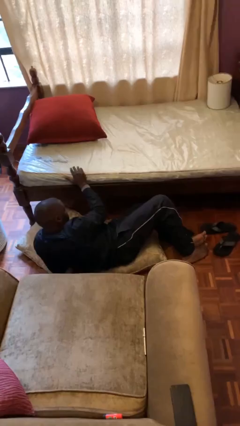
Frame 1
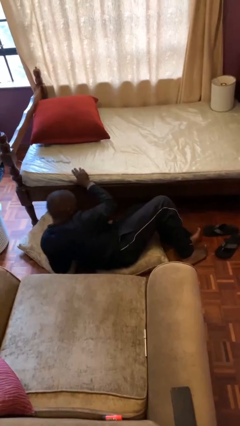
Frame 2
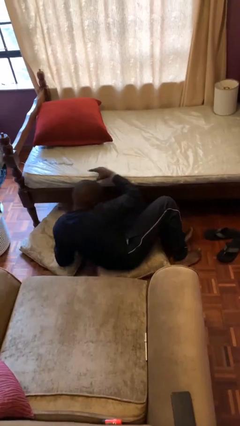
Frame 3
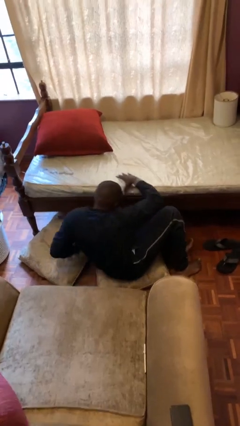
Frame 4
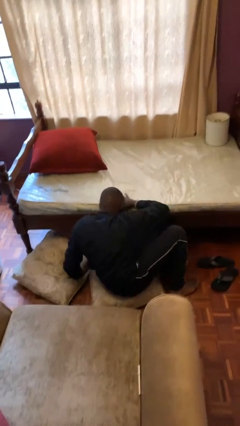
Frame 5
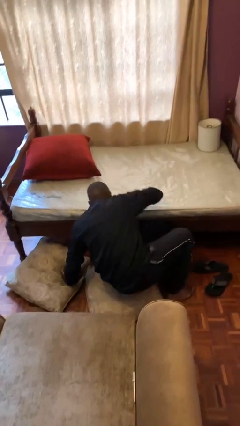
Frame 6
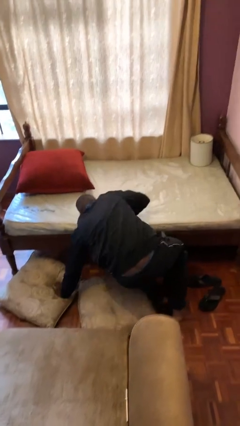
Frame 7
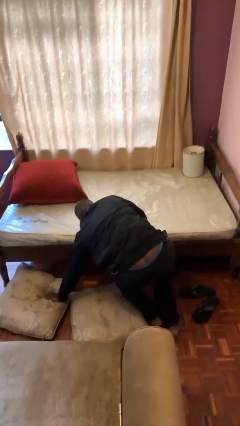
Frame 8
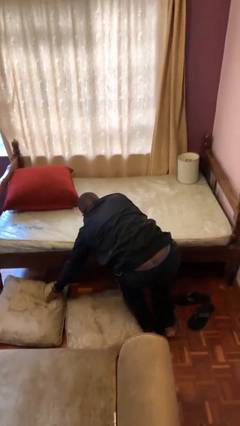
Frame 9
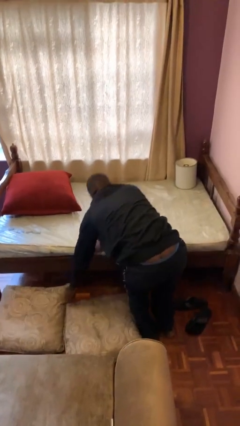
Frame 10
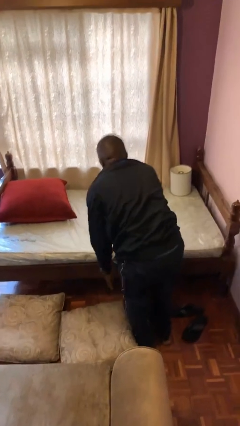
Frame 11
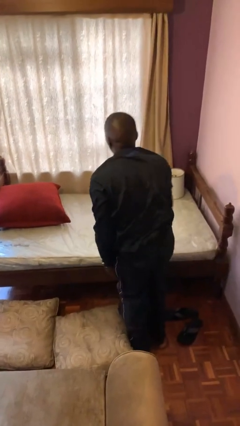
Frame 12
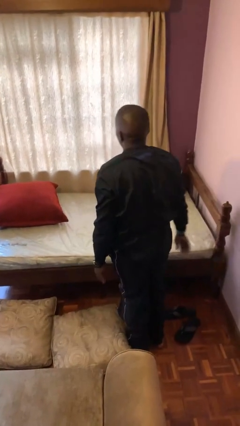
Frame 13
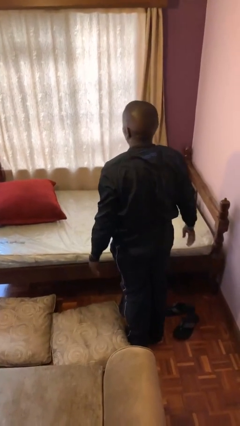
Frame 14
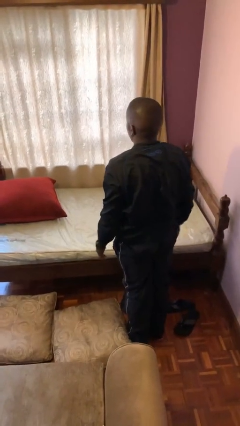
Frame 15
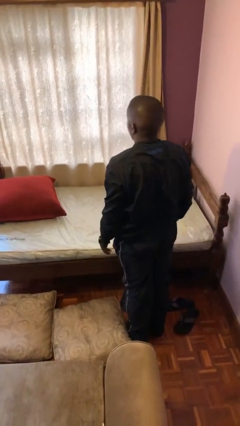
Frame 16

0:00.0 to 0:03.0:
person stands up from floor

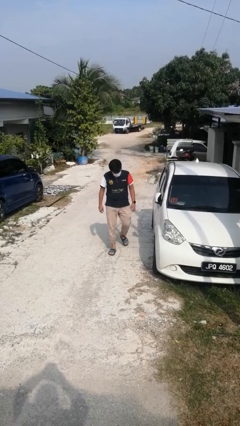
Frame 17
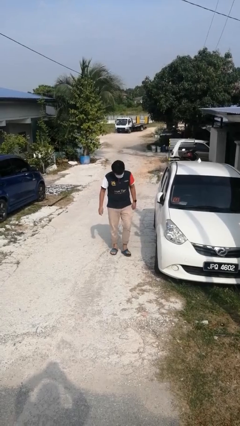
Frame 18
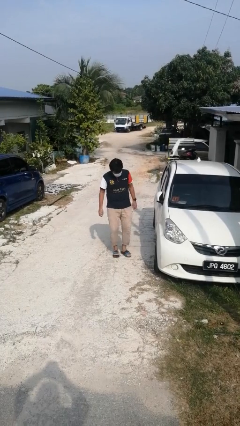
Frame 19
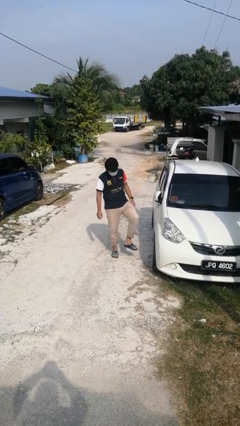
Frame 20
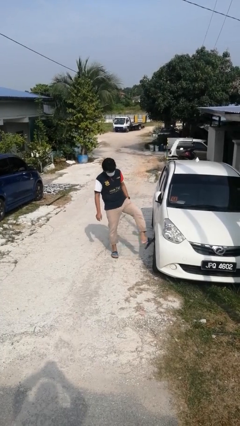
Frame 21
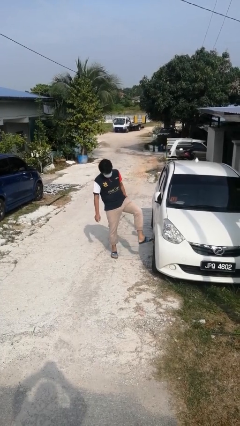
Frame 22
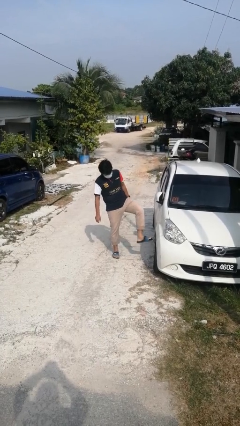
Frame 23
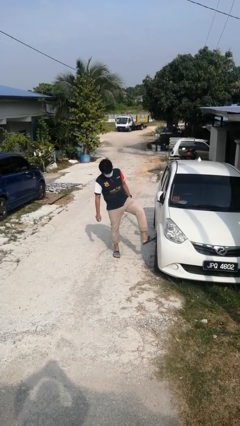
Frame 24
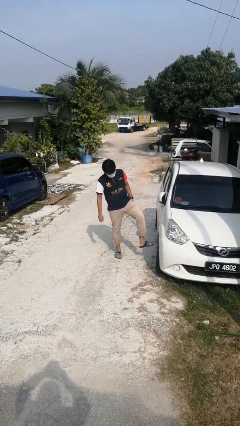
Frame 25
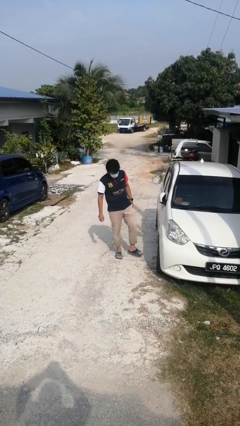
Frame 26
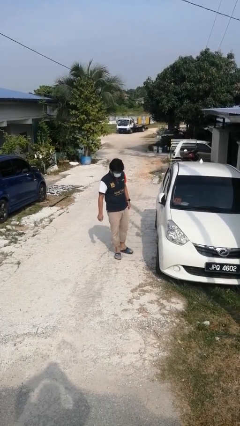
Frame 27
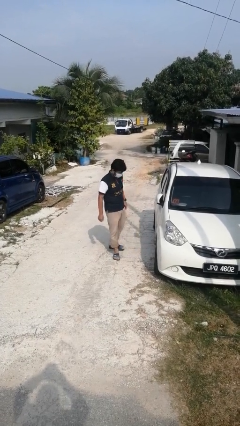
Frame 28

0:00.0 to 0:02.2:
person kicks car tires

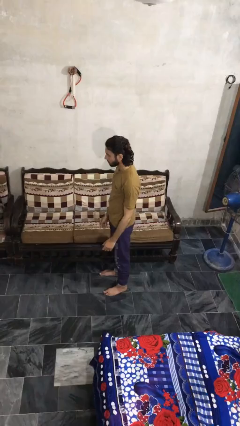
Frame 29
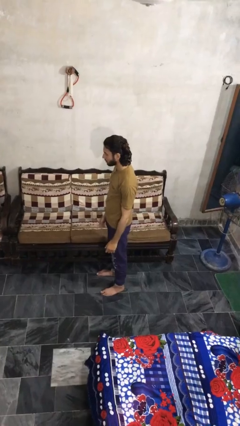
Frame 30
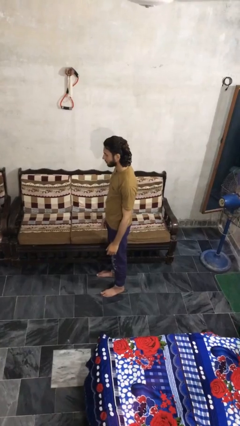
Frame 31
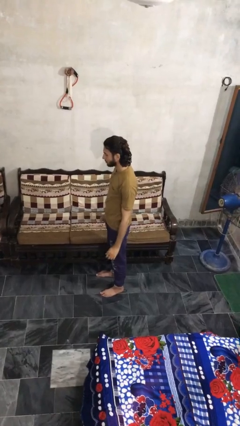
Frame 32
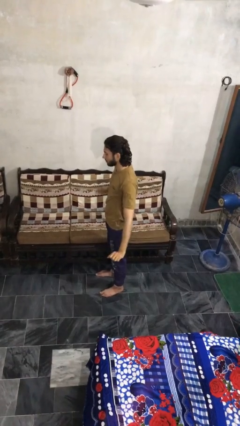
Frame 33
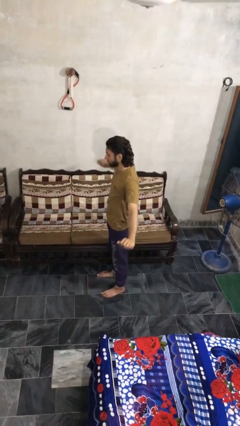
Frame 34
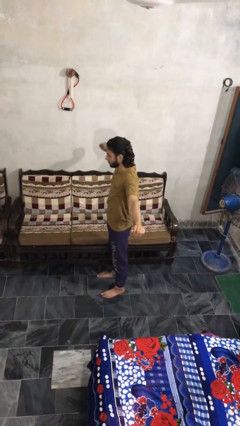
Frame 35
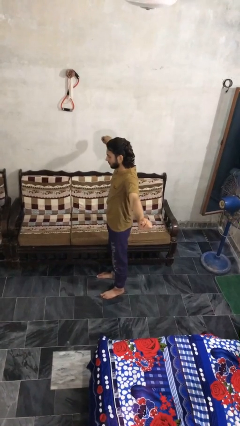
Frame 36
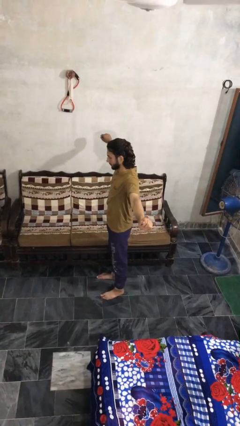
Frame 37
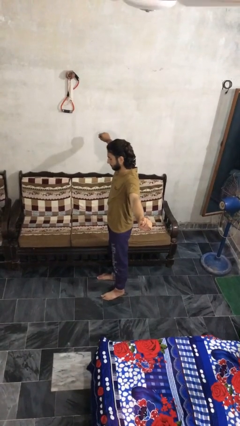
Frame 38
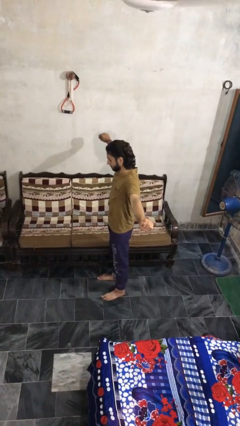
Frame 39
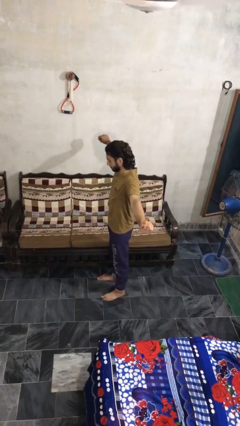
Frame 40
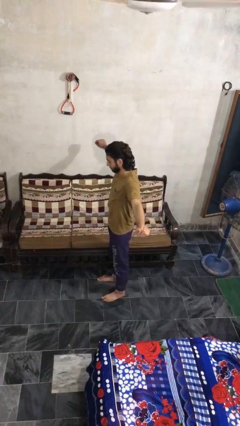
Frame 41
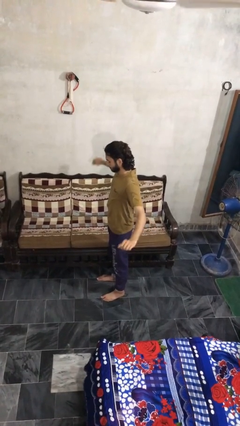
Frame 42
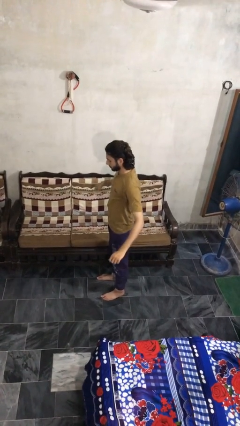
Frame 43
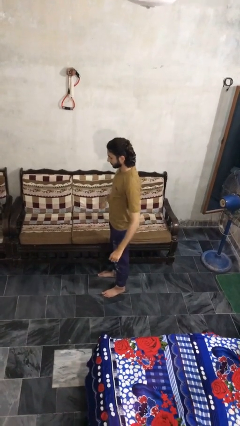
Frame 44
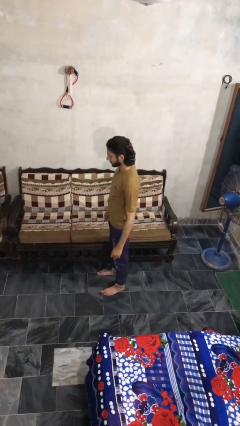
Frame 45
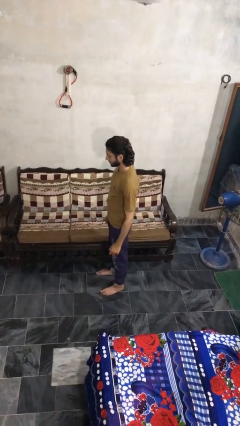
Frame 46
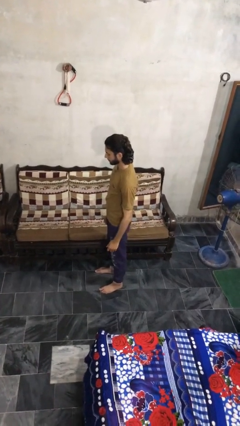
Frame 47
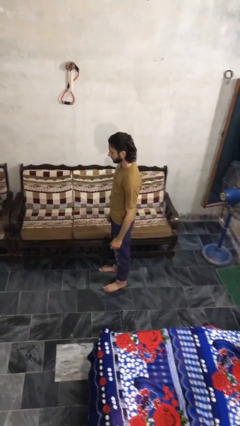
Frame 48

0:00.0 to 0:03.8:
person stretches arms to side

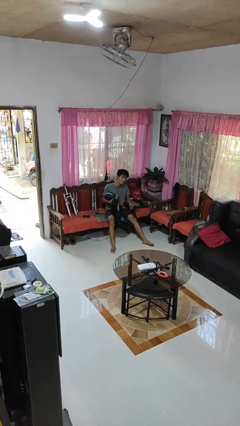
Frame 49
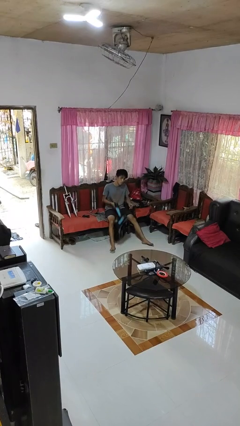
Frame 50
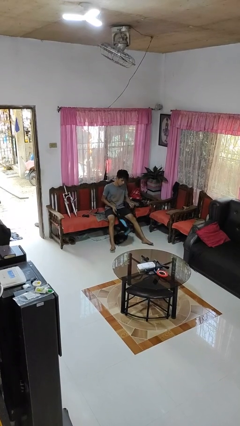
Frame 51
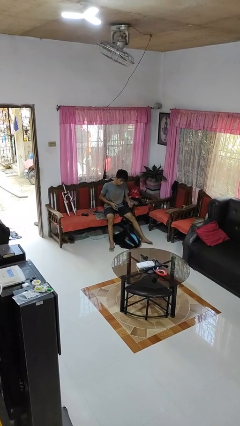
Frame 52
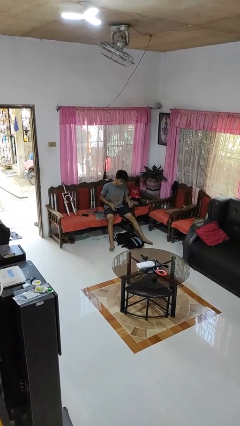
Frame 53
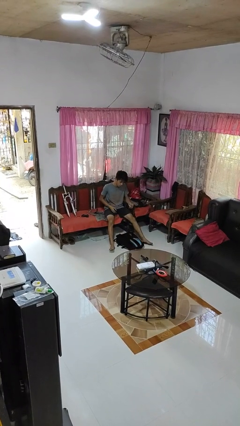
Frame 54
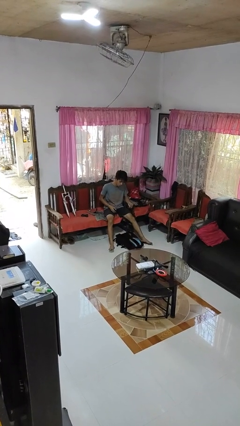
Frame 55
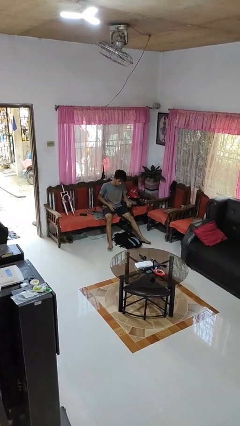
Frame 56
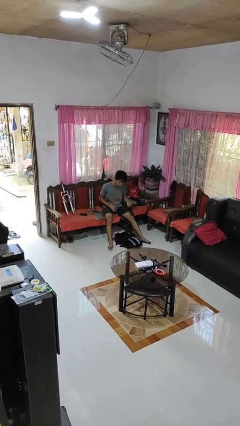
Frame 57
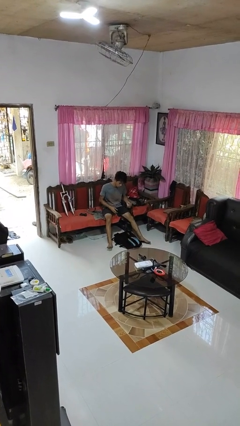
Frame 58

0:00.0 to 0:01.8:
person drops object

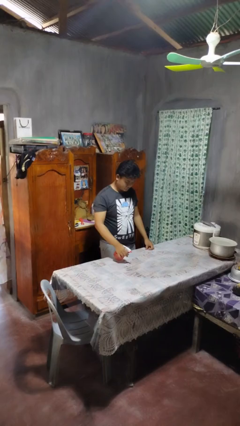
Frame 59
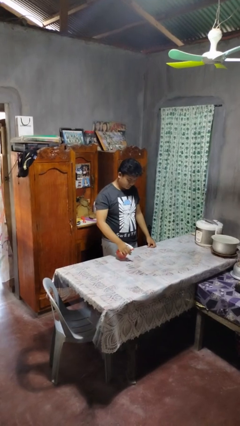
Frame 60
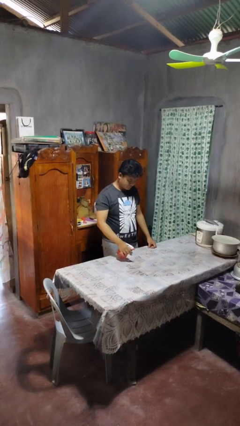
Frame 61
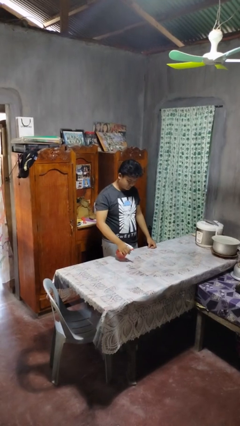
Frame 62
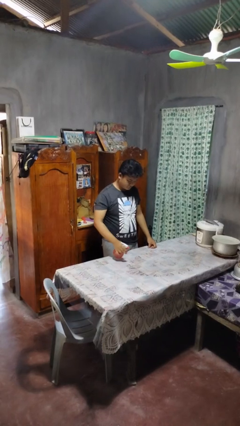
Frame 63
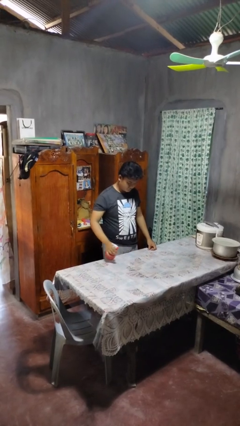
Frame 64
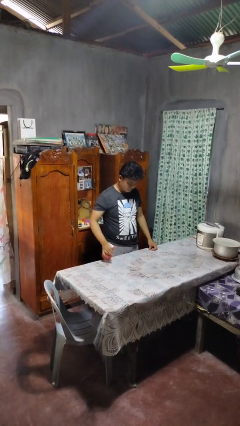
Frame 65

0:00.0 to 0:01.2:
person sprays from bottle

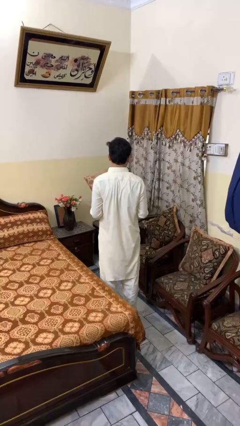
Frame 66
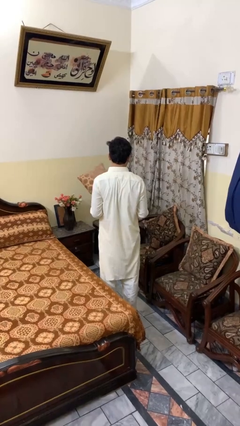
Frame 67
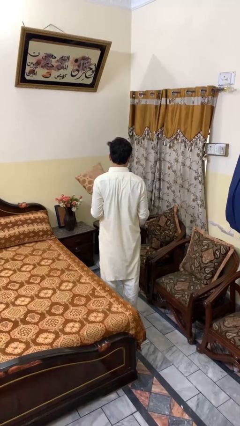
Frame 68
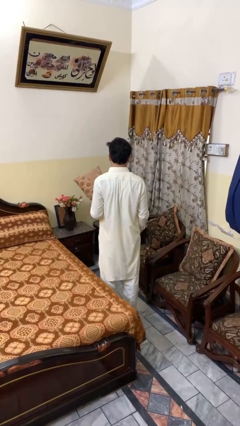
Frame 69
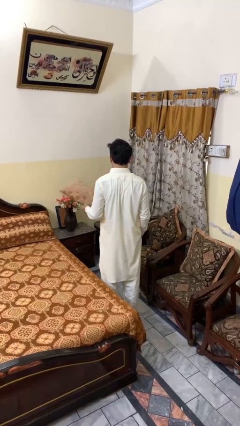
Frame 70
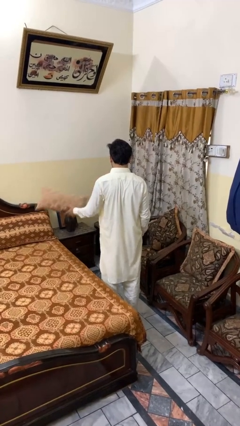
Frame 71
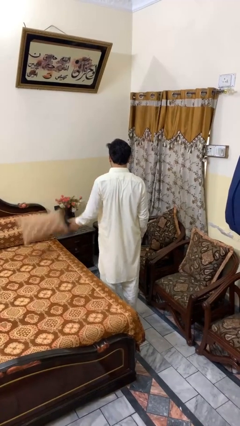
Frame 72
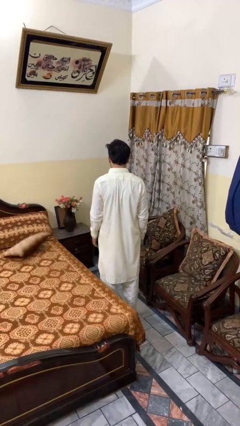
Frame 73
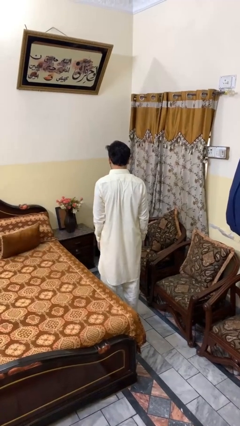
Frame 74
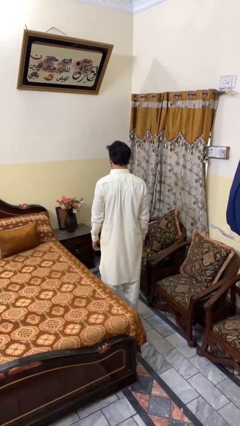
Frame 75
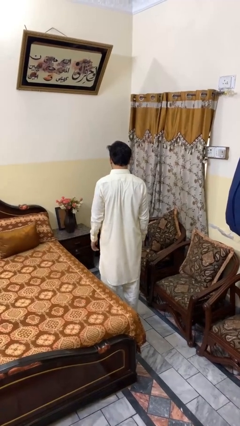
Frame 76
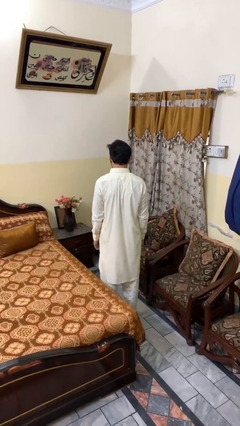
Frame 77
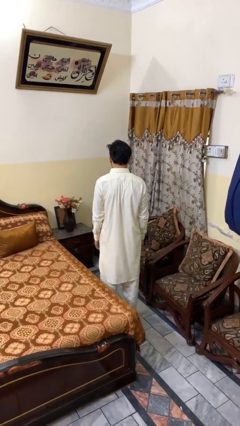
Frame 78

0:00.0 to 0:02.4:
person throws object on bed

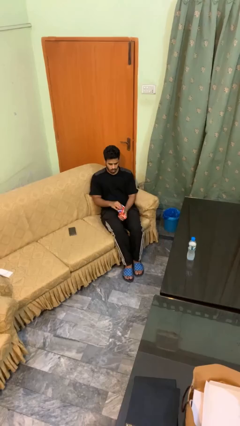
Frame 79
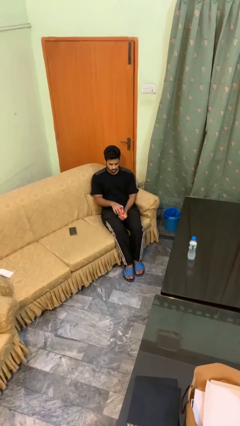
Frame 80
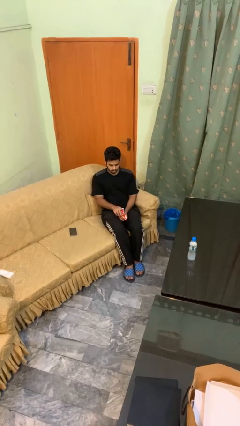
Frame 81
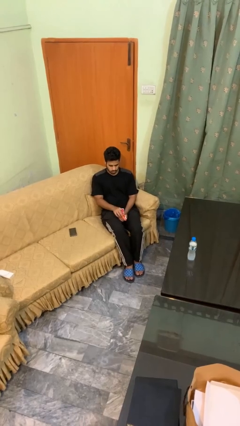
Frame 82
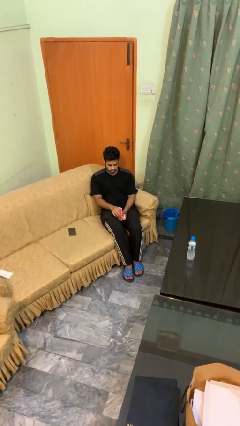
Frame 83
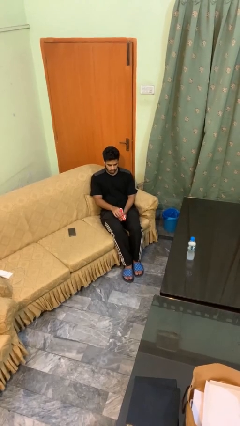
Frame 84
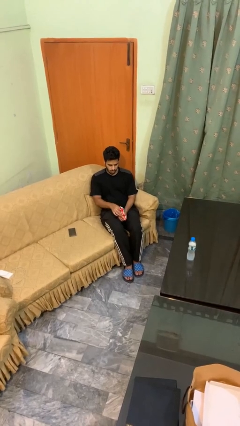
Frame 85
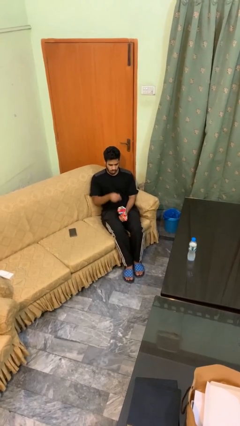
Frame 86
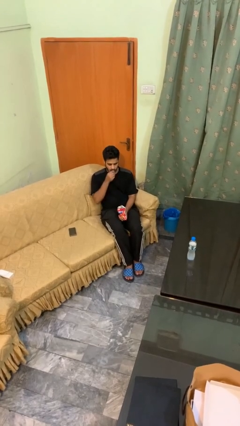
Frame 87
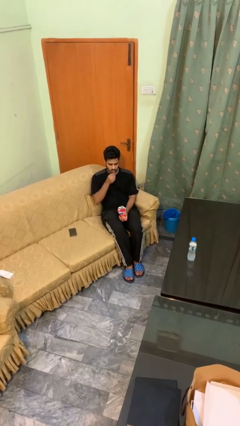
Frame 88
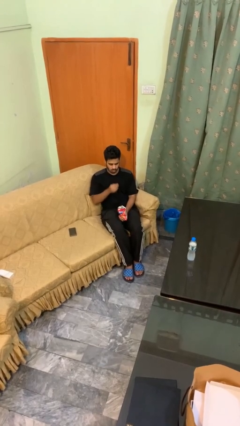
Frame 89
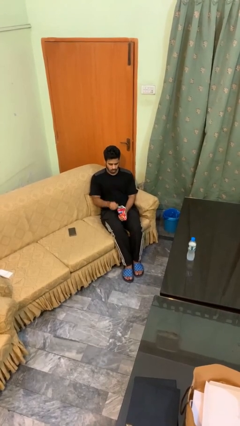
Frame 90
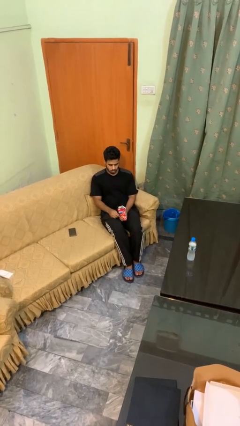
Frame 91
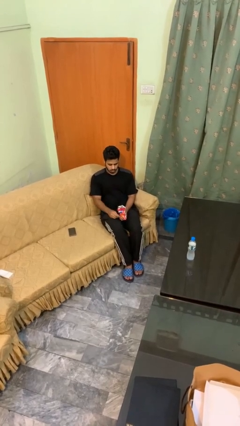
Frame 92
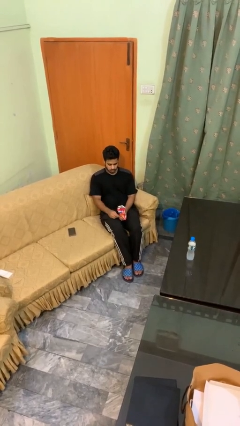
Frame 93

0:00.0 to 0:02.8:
person eats snack from bag
